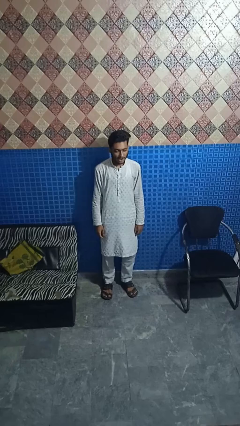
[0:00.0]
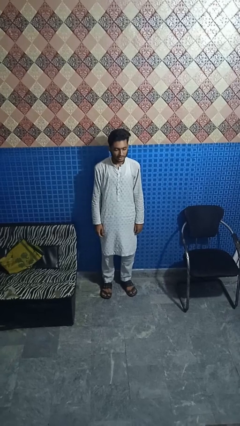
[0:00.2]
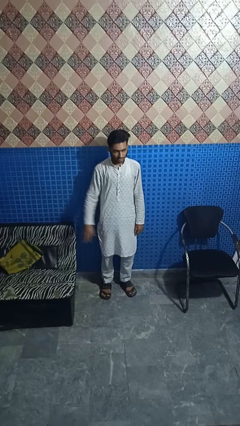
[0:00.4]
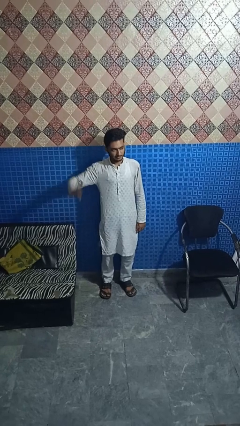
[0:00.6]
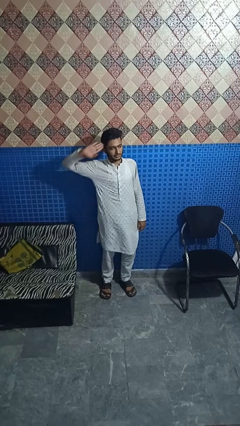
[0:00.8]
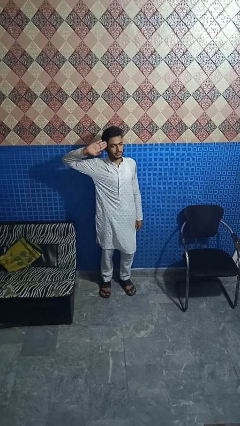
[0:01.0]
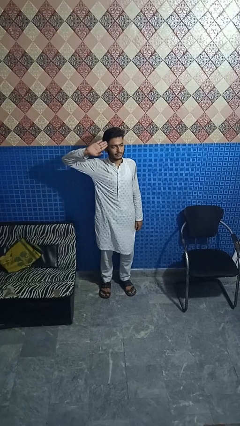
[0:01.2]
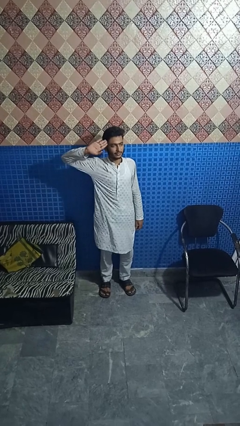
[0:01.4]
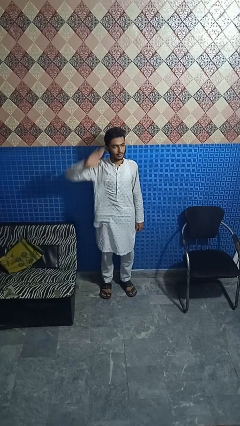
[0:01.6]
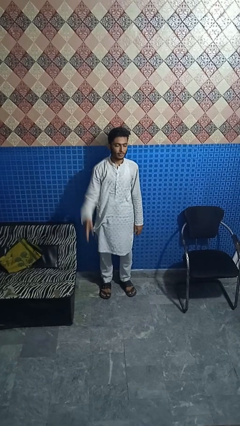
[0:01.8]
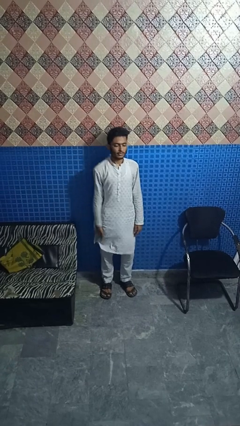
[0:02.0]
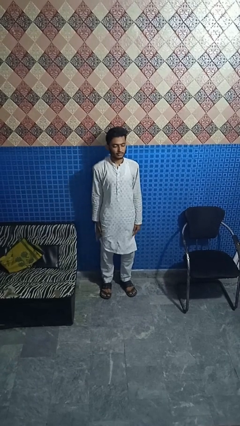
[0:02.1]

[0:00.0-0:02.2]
person salutes

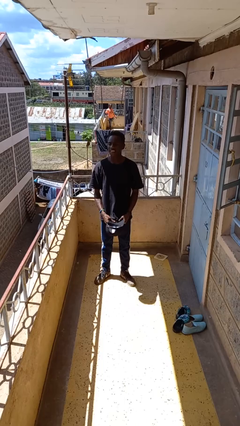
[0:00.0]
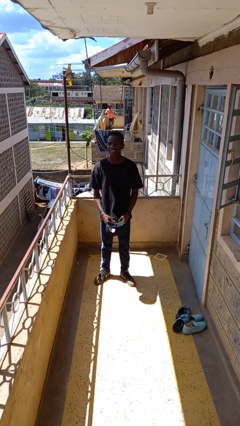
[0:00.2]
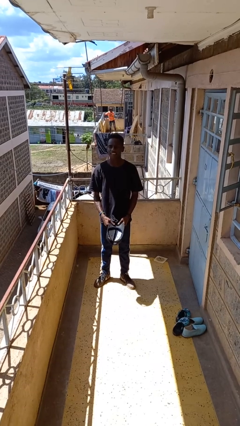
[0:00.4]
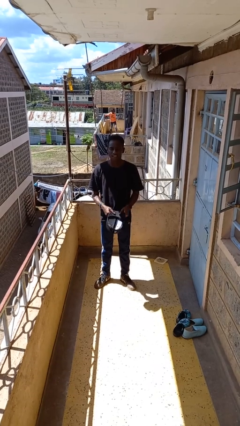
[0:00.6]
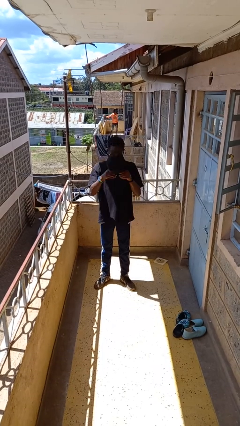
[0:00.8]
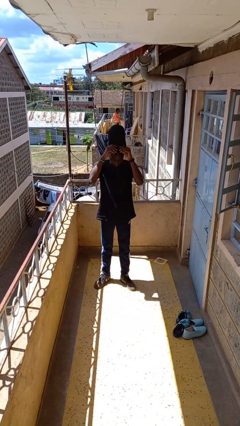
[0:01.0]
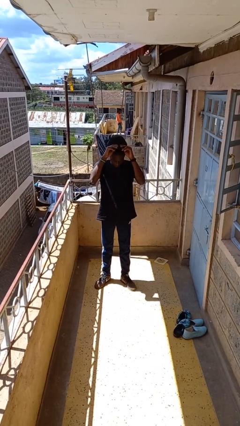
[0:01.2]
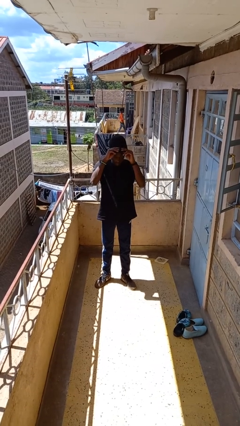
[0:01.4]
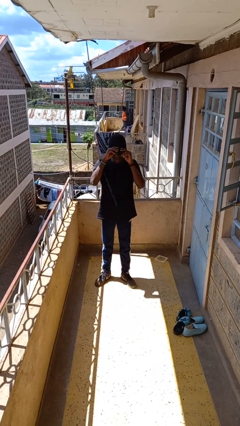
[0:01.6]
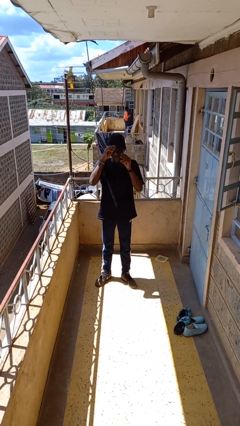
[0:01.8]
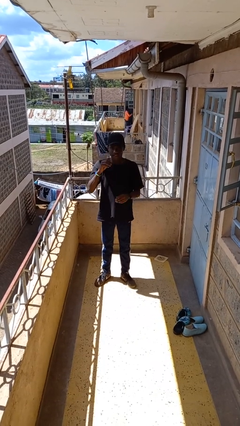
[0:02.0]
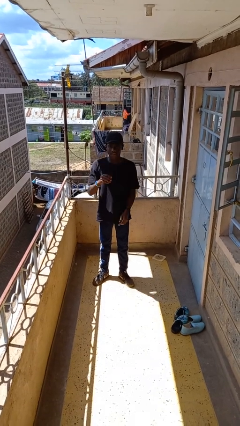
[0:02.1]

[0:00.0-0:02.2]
person puts on hat

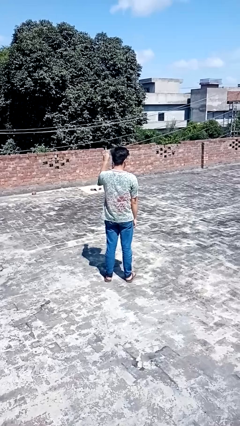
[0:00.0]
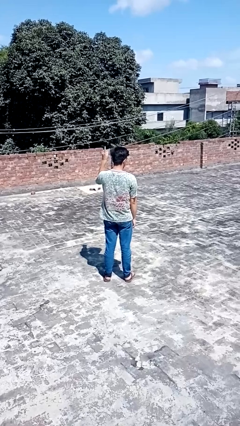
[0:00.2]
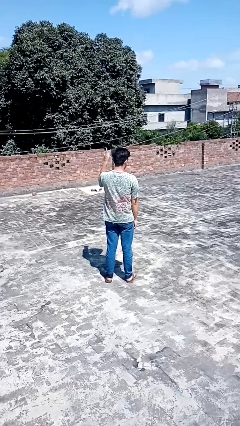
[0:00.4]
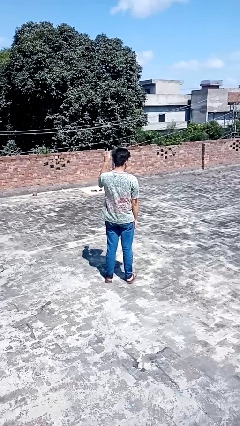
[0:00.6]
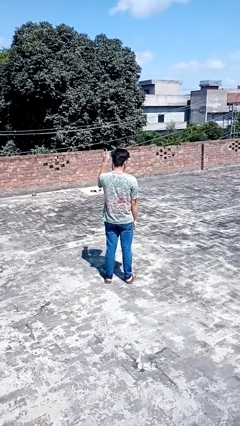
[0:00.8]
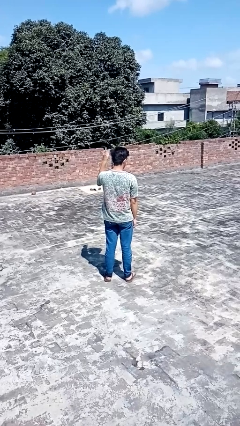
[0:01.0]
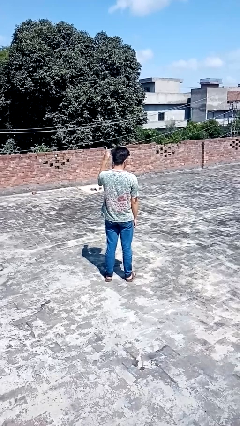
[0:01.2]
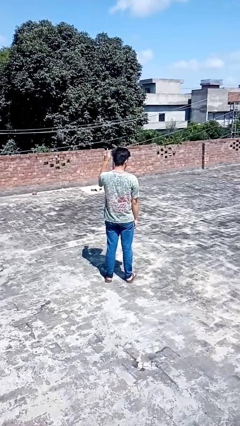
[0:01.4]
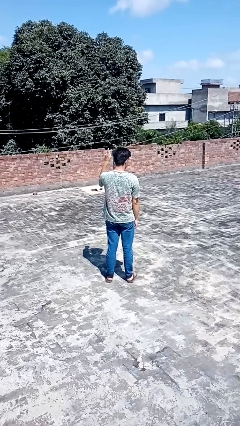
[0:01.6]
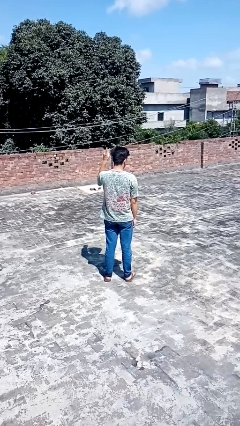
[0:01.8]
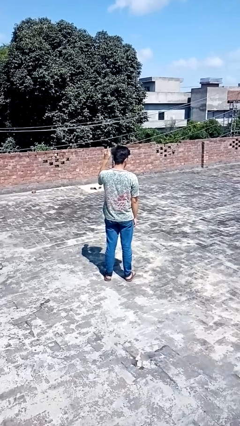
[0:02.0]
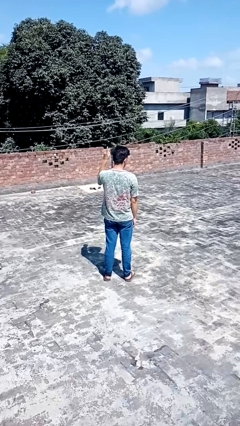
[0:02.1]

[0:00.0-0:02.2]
person gestures number one

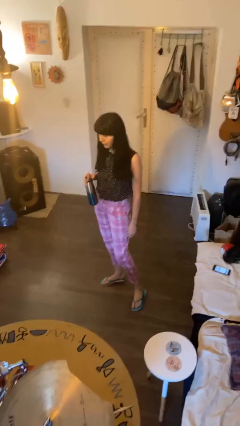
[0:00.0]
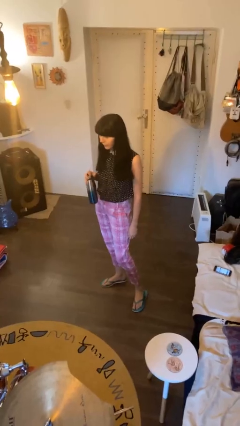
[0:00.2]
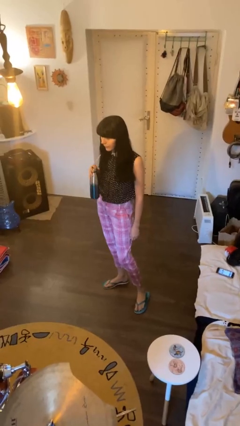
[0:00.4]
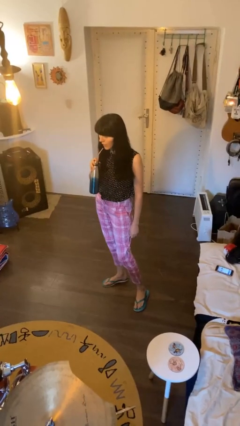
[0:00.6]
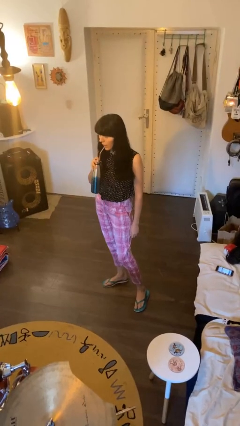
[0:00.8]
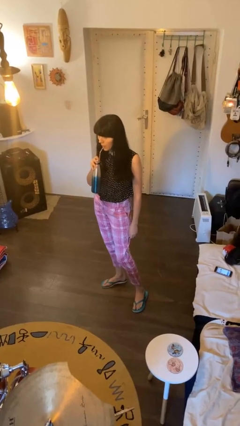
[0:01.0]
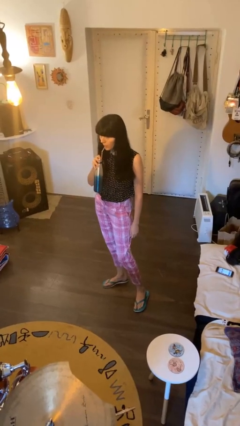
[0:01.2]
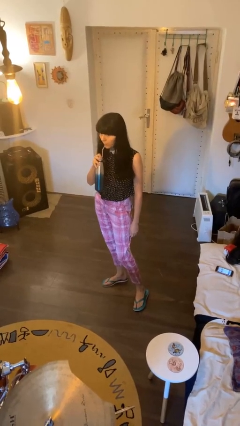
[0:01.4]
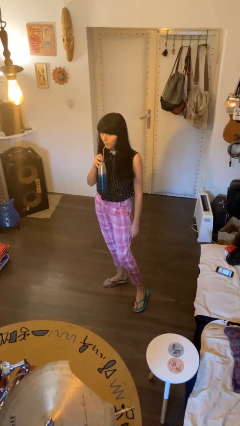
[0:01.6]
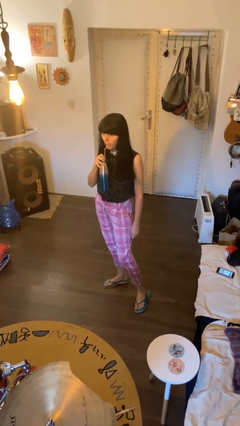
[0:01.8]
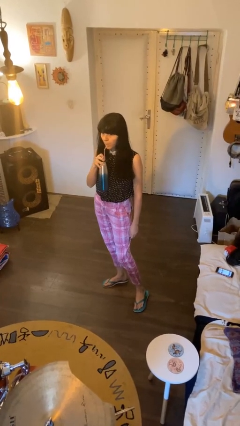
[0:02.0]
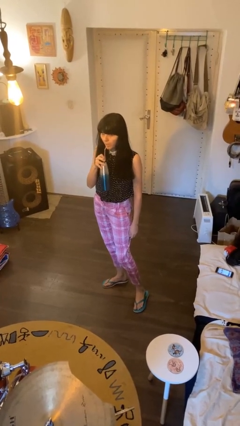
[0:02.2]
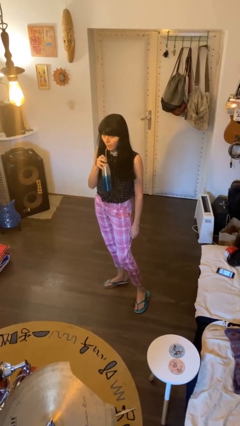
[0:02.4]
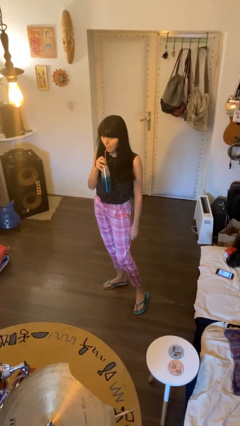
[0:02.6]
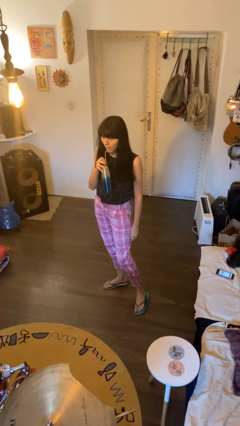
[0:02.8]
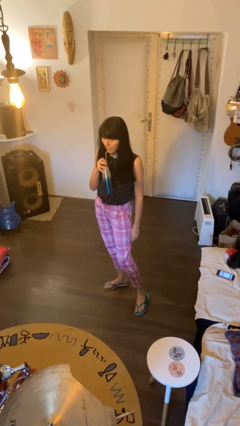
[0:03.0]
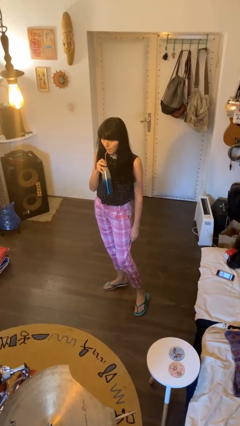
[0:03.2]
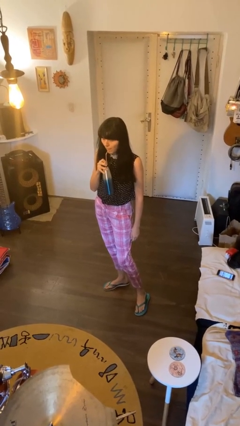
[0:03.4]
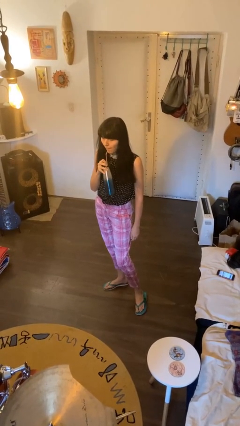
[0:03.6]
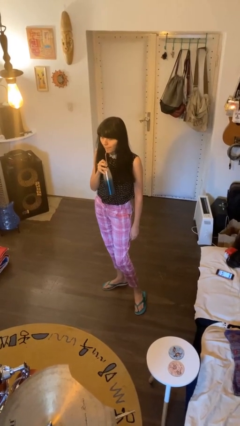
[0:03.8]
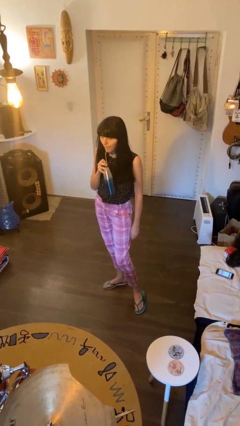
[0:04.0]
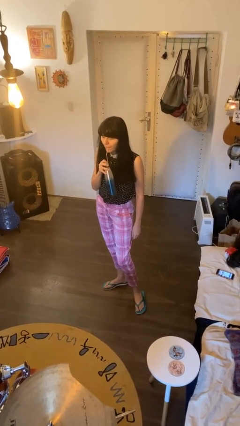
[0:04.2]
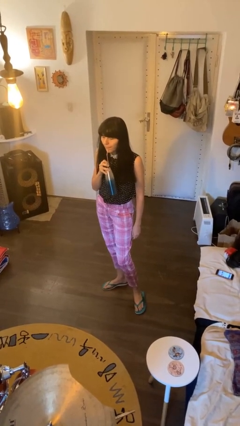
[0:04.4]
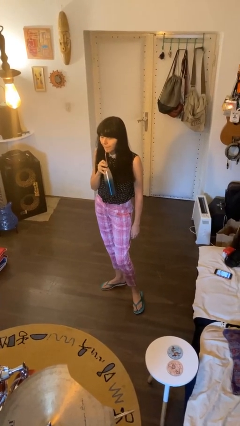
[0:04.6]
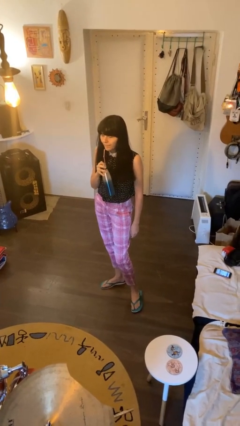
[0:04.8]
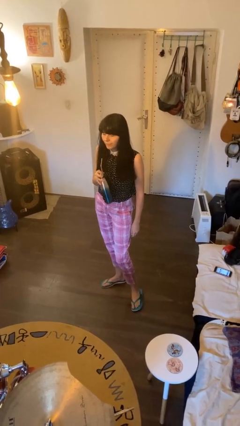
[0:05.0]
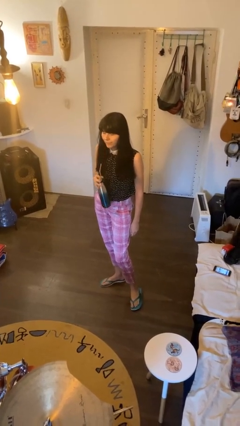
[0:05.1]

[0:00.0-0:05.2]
person drinks from straw

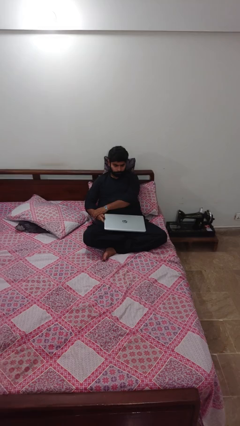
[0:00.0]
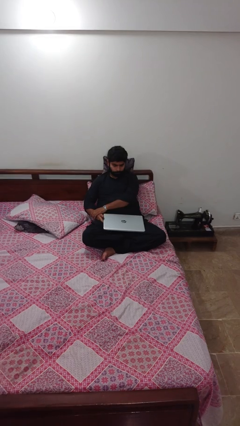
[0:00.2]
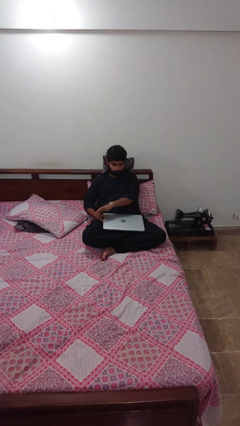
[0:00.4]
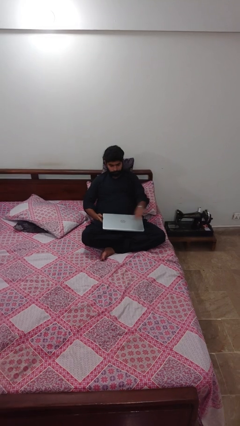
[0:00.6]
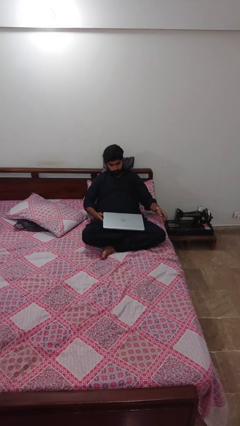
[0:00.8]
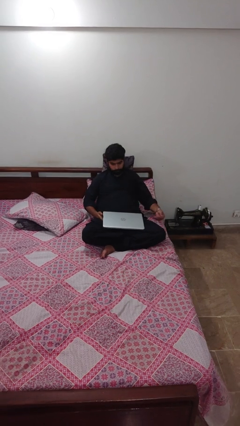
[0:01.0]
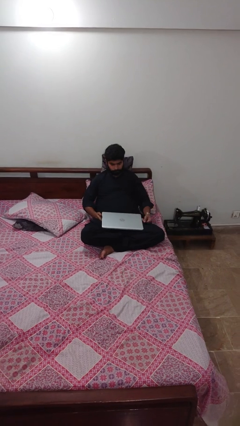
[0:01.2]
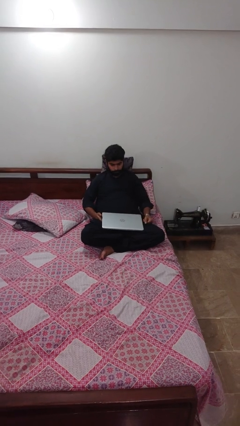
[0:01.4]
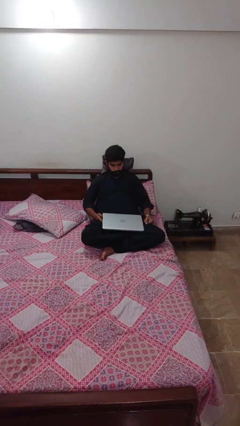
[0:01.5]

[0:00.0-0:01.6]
person waves hand over object

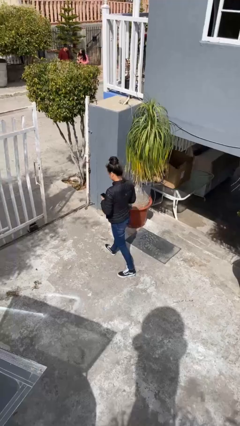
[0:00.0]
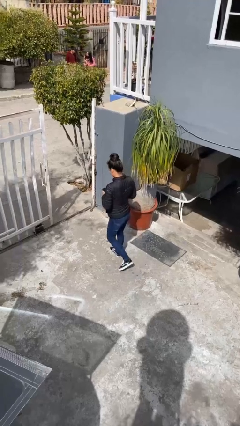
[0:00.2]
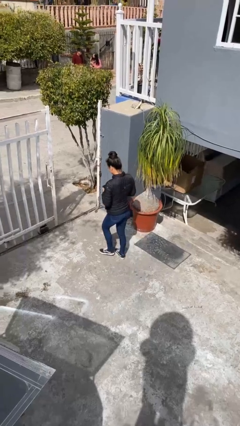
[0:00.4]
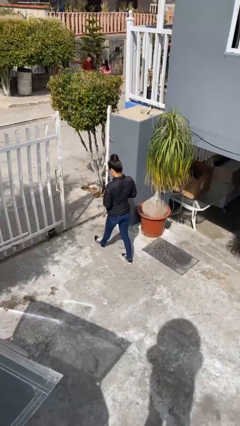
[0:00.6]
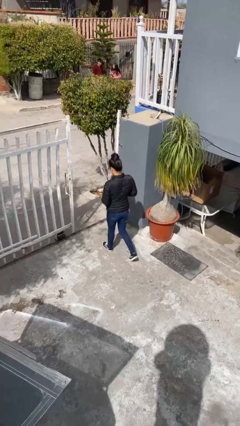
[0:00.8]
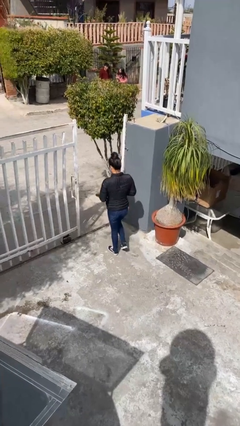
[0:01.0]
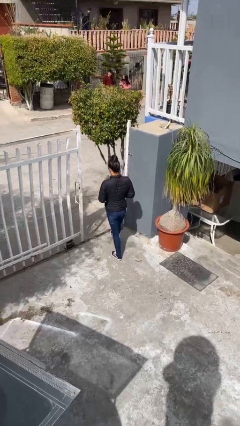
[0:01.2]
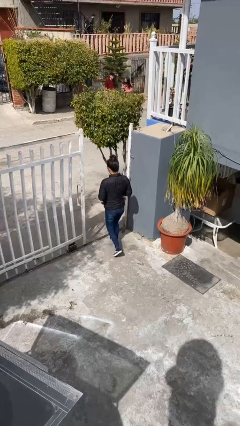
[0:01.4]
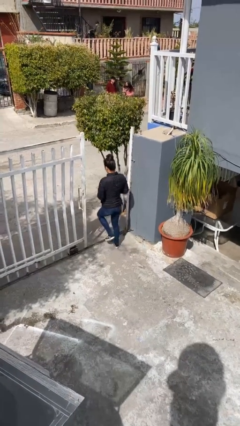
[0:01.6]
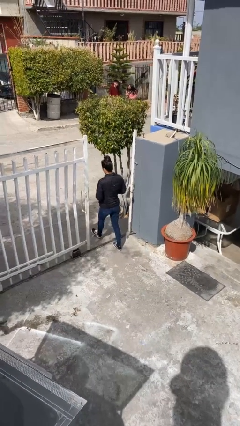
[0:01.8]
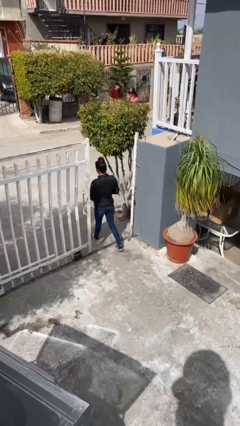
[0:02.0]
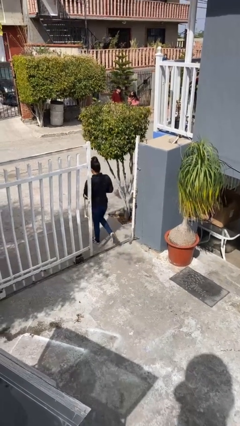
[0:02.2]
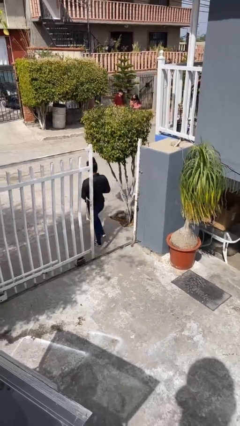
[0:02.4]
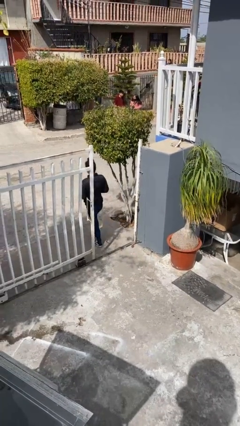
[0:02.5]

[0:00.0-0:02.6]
person exits scene through structure

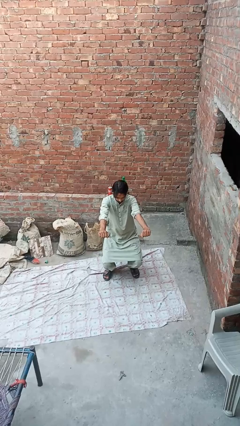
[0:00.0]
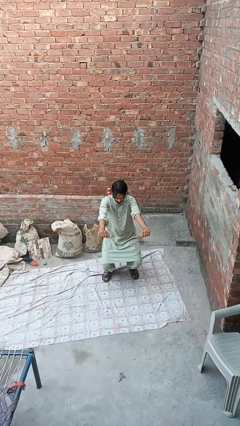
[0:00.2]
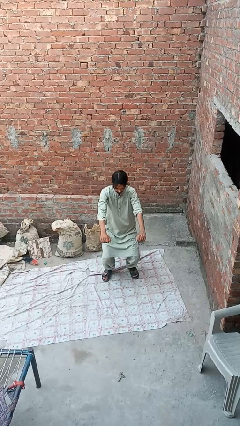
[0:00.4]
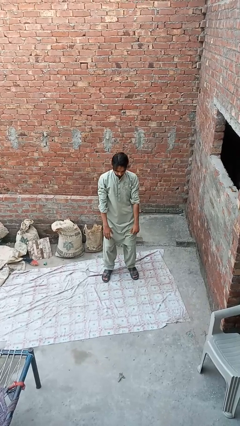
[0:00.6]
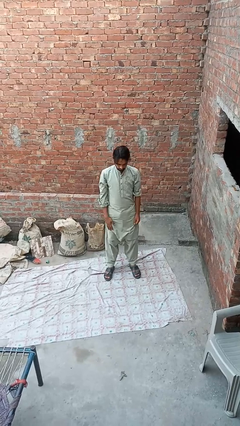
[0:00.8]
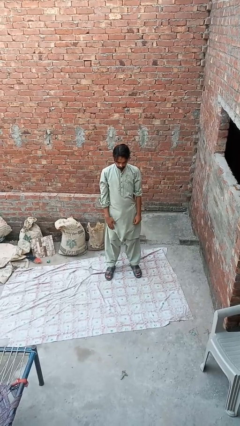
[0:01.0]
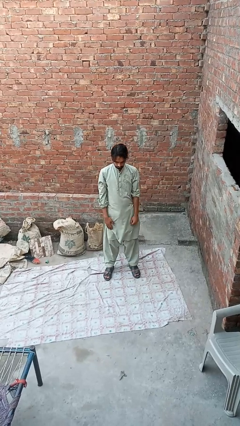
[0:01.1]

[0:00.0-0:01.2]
person stands up

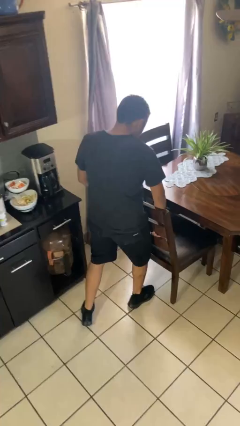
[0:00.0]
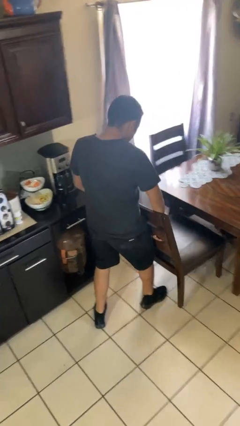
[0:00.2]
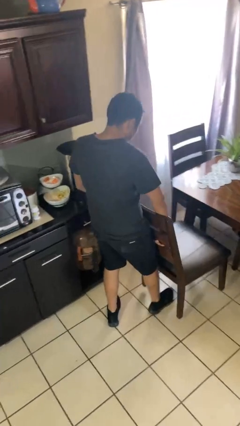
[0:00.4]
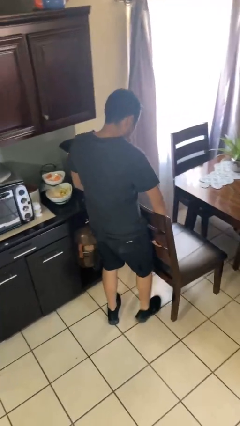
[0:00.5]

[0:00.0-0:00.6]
person pulls out chair
